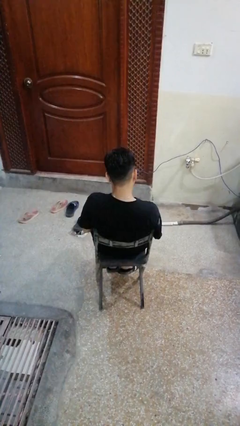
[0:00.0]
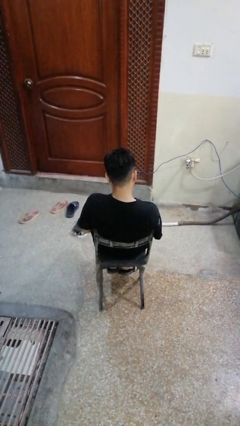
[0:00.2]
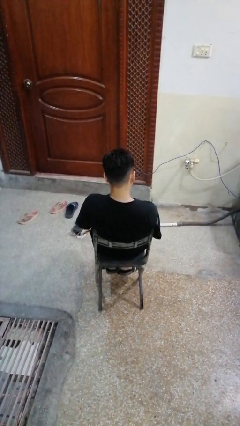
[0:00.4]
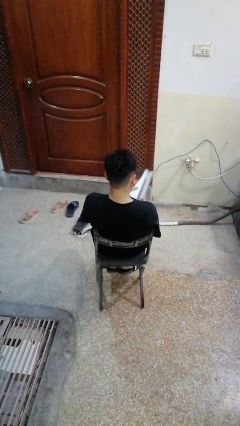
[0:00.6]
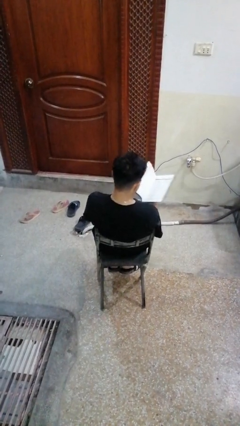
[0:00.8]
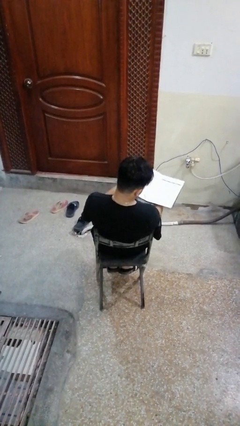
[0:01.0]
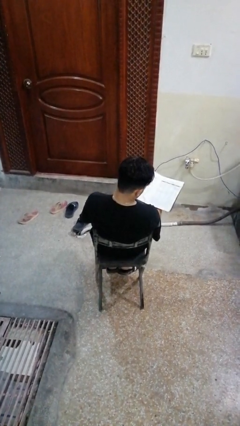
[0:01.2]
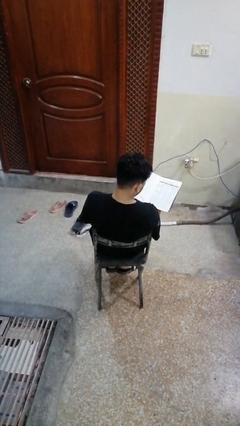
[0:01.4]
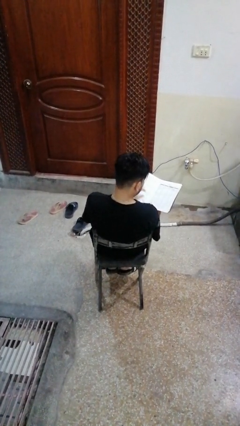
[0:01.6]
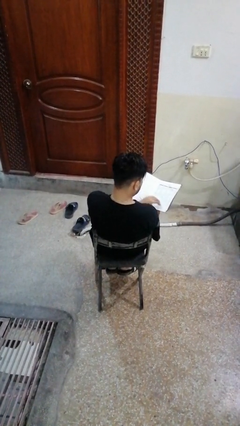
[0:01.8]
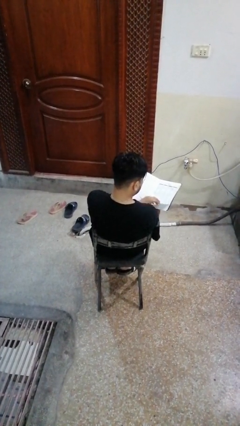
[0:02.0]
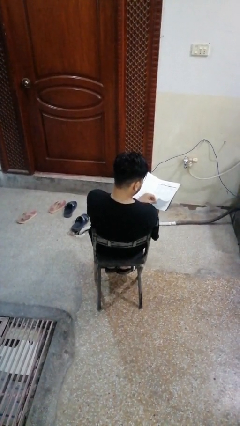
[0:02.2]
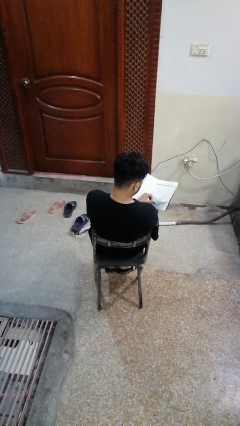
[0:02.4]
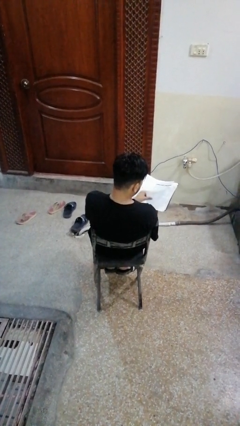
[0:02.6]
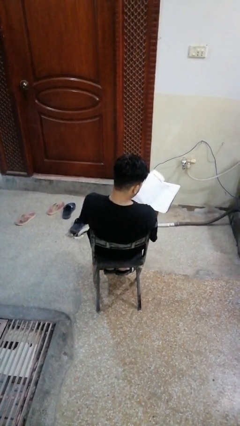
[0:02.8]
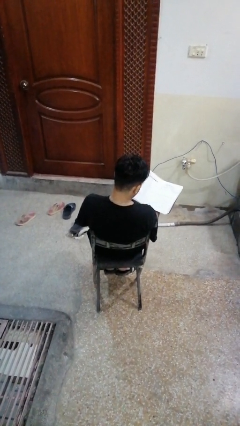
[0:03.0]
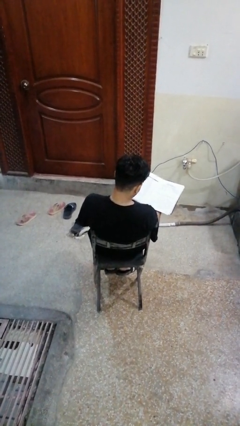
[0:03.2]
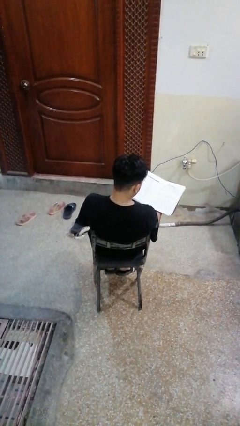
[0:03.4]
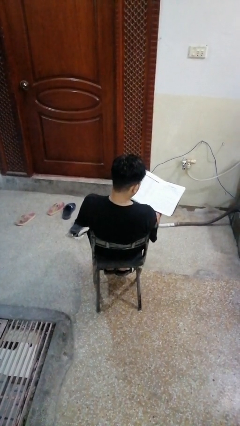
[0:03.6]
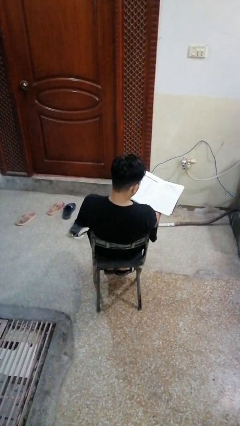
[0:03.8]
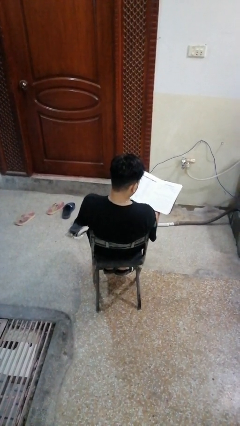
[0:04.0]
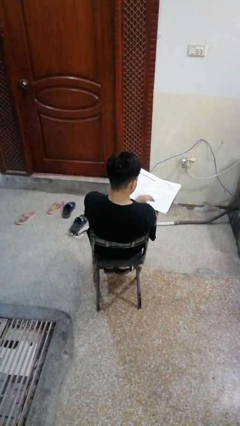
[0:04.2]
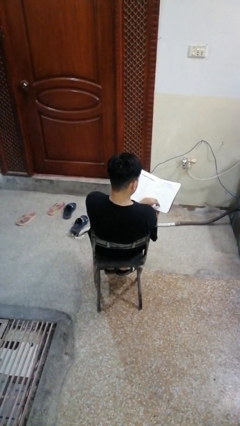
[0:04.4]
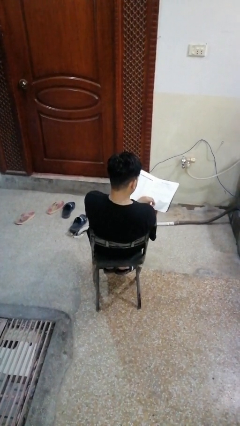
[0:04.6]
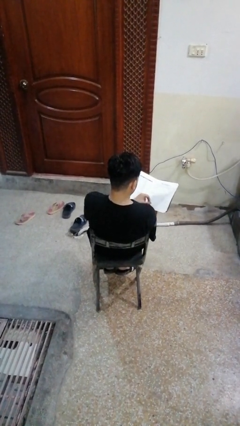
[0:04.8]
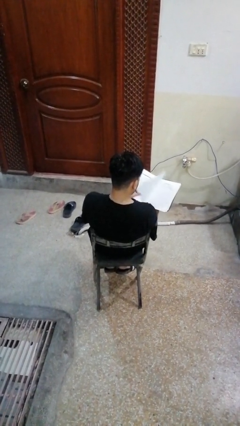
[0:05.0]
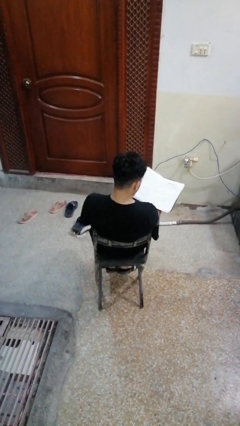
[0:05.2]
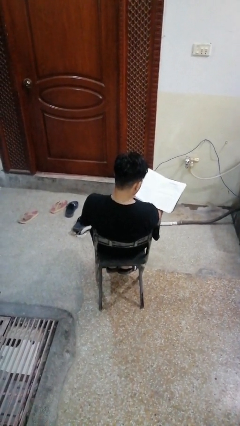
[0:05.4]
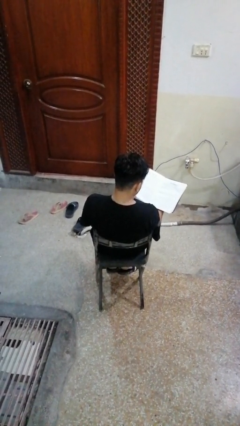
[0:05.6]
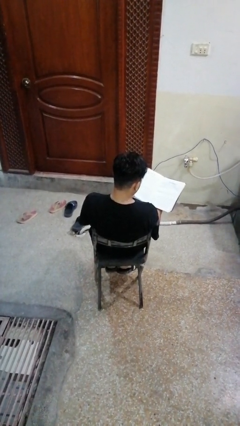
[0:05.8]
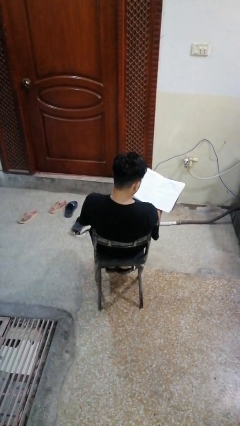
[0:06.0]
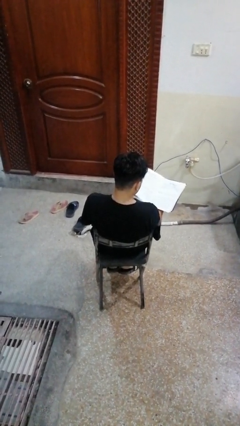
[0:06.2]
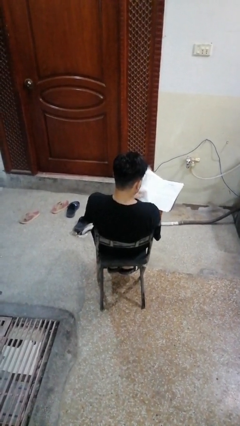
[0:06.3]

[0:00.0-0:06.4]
person reads book

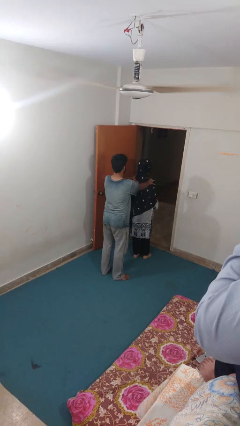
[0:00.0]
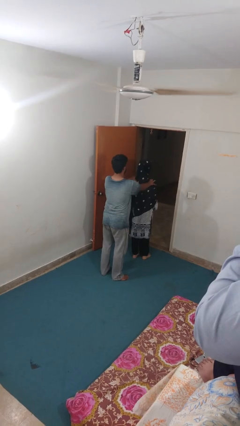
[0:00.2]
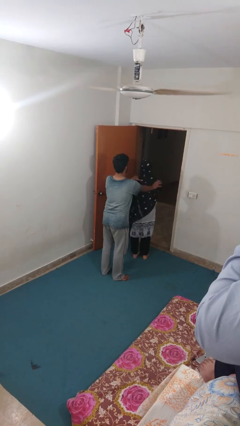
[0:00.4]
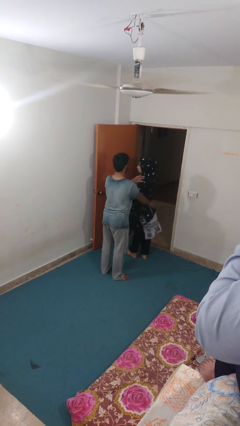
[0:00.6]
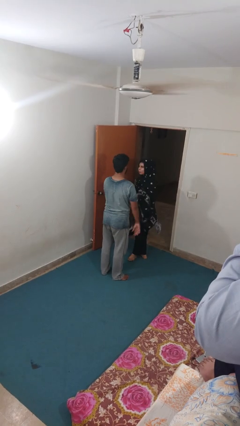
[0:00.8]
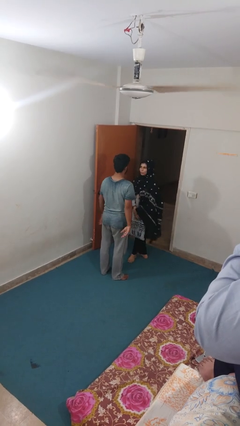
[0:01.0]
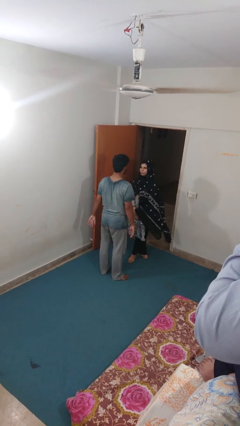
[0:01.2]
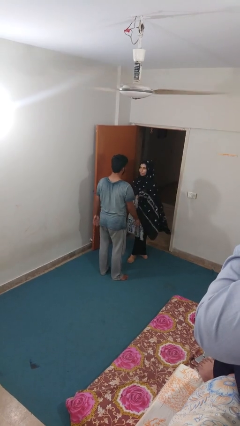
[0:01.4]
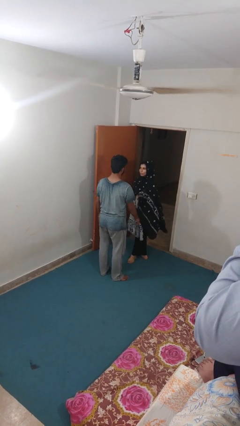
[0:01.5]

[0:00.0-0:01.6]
person spins person around

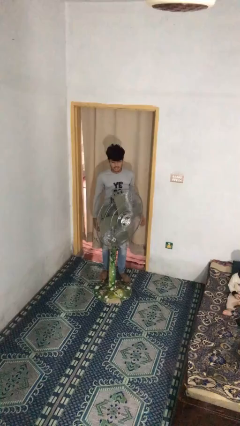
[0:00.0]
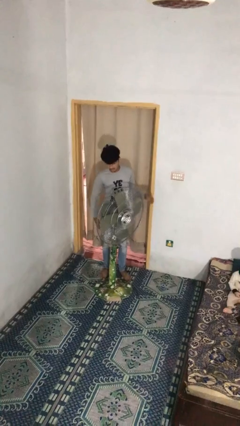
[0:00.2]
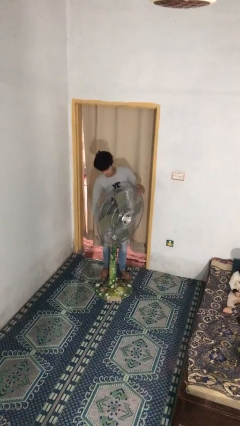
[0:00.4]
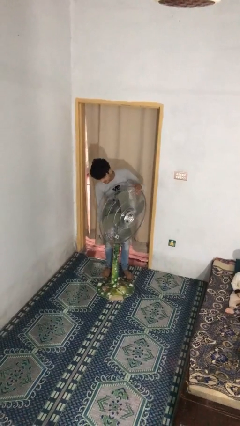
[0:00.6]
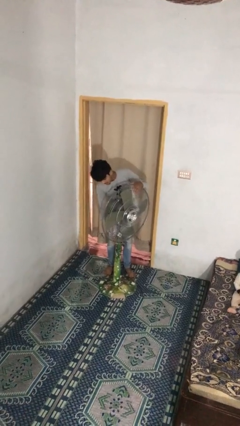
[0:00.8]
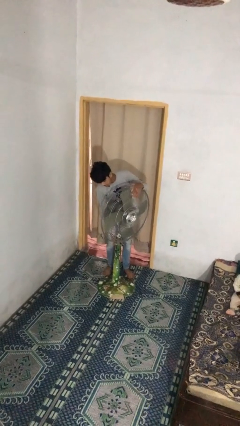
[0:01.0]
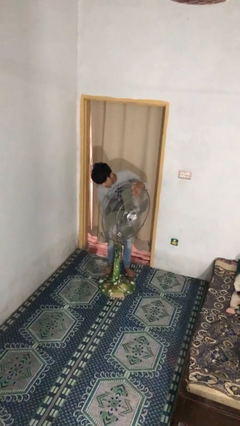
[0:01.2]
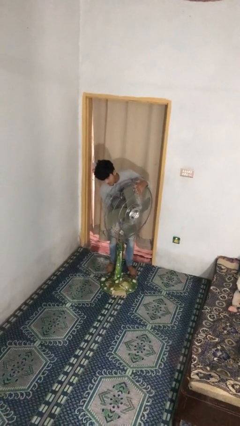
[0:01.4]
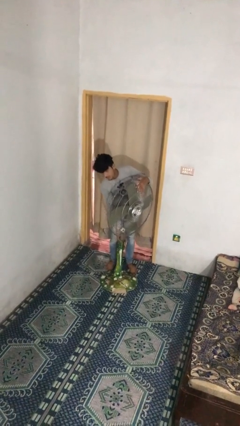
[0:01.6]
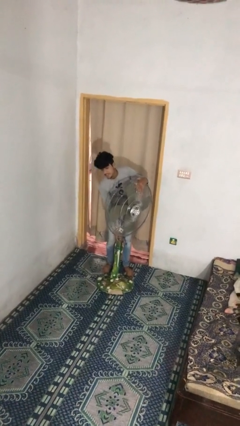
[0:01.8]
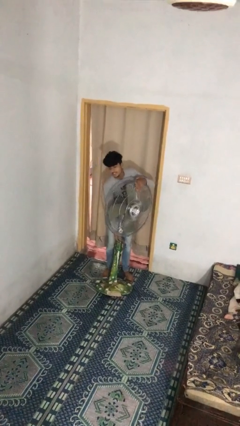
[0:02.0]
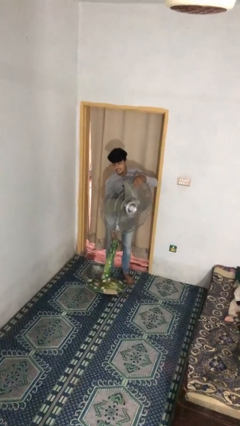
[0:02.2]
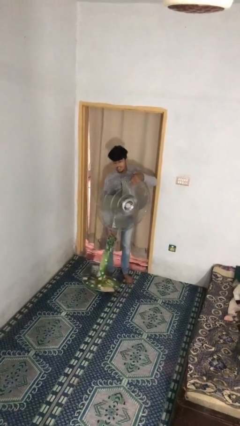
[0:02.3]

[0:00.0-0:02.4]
person picks up object from floor

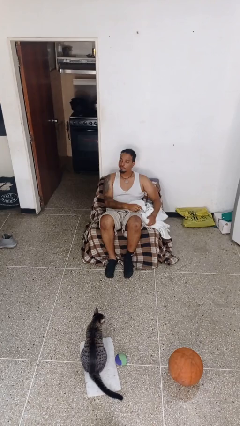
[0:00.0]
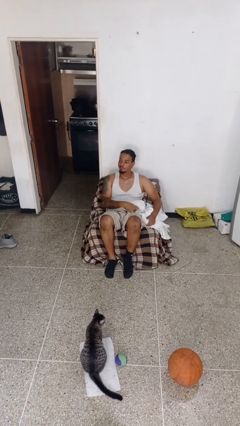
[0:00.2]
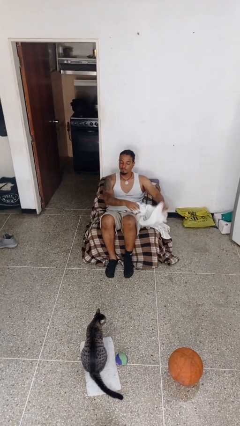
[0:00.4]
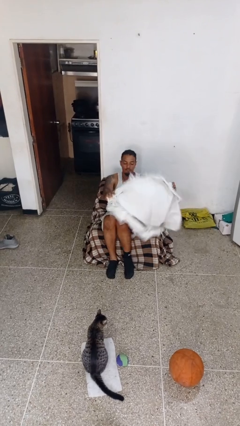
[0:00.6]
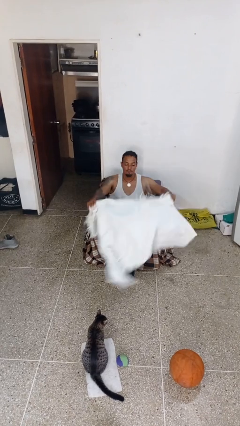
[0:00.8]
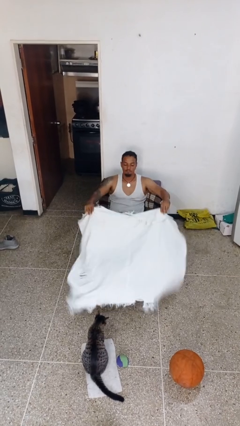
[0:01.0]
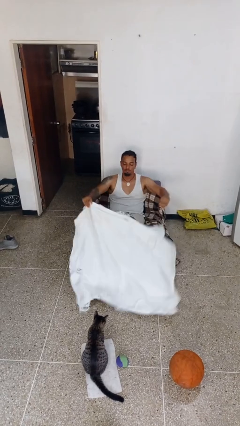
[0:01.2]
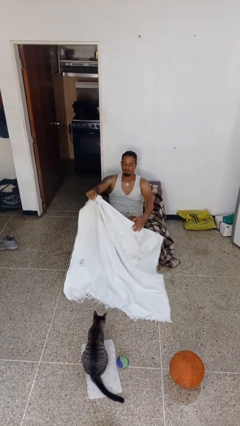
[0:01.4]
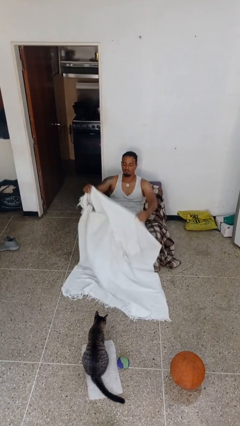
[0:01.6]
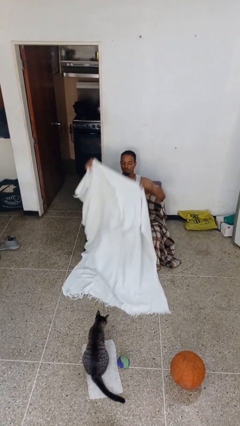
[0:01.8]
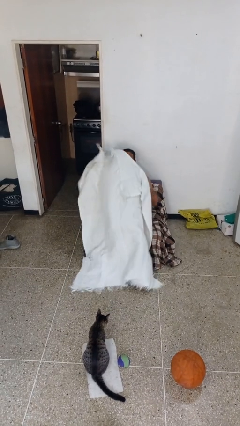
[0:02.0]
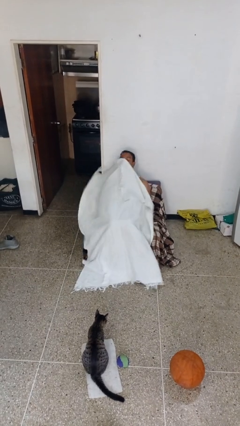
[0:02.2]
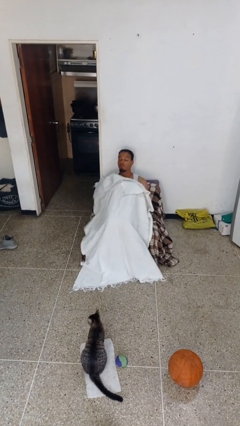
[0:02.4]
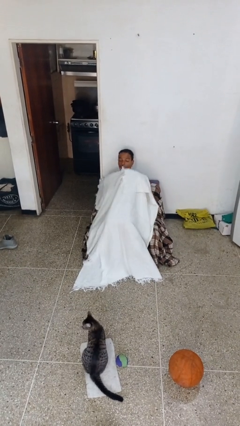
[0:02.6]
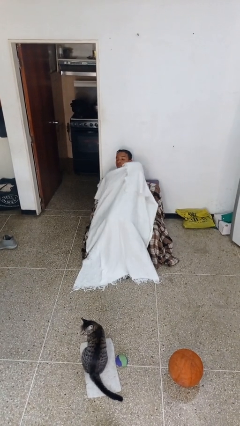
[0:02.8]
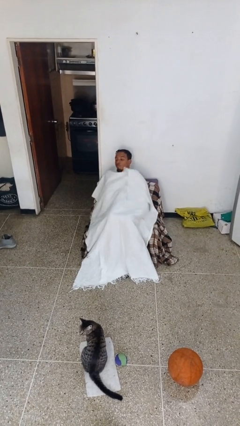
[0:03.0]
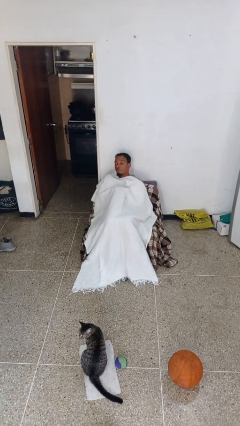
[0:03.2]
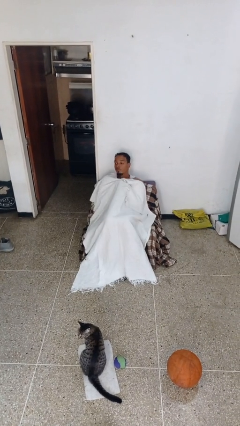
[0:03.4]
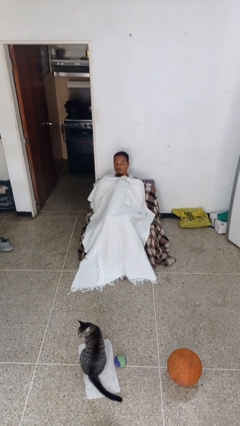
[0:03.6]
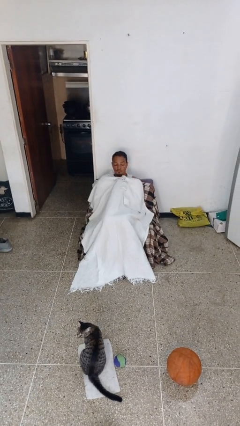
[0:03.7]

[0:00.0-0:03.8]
person covers with blanket

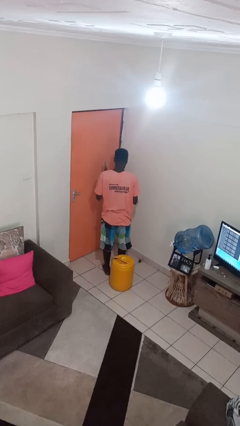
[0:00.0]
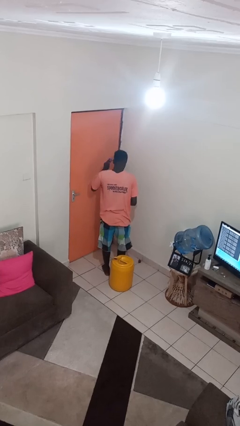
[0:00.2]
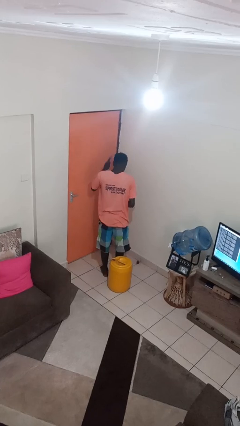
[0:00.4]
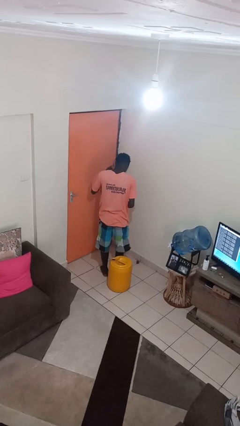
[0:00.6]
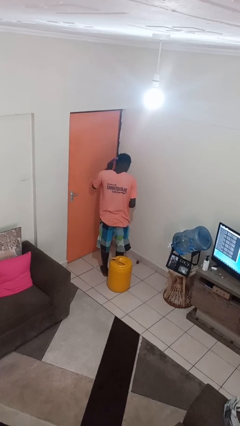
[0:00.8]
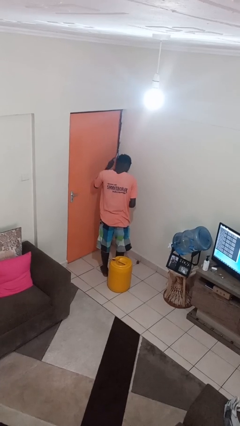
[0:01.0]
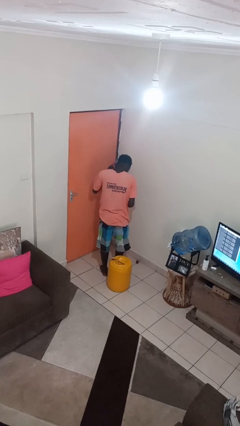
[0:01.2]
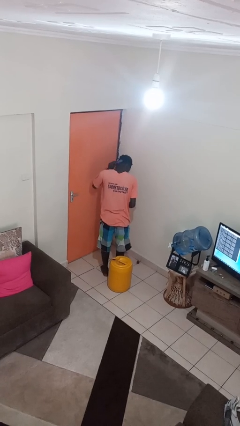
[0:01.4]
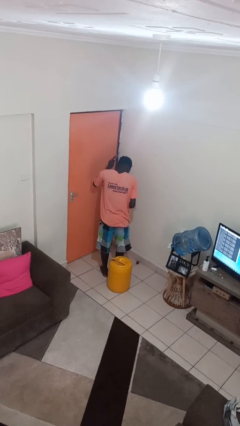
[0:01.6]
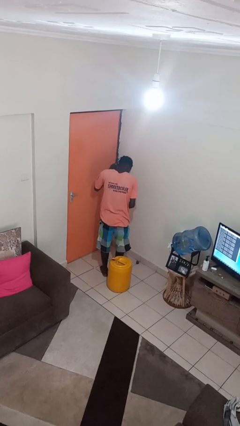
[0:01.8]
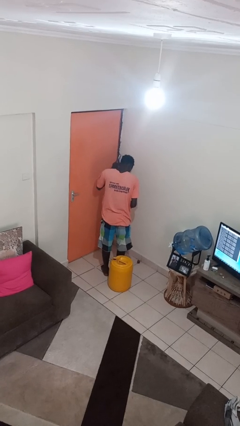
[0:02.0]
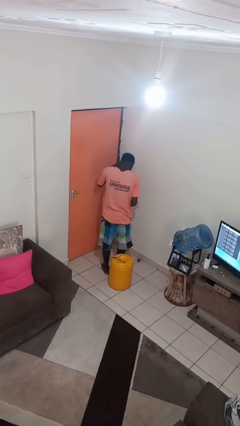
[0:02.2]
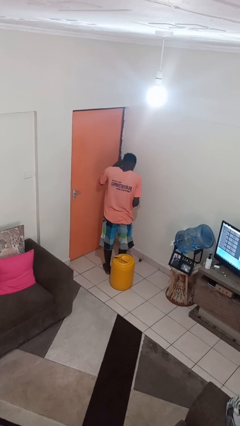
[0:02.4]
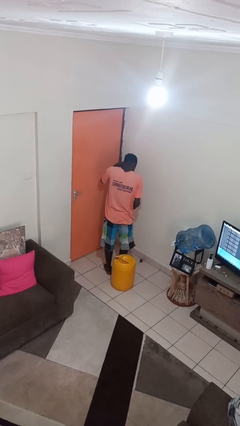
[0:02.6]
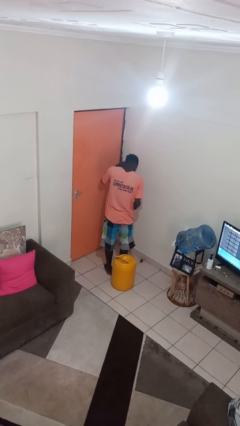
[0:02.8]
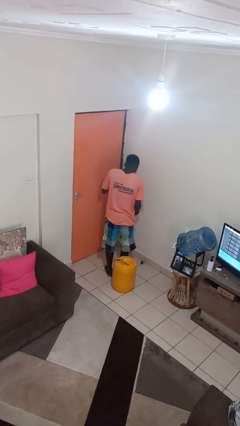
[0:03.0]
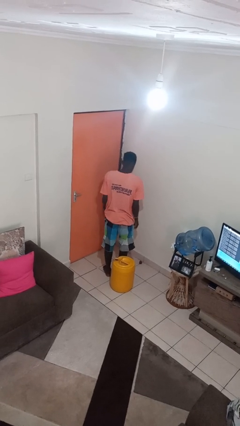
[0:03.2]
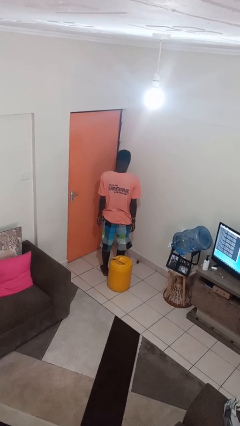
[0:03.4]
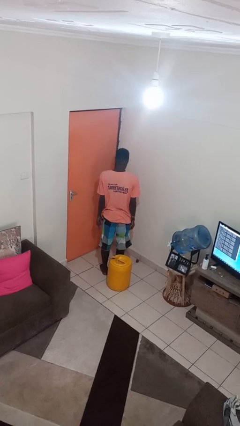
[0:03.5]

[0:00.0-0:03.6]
person brushes hair
